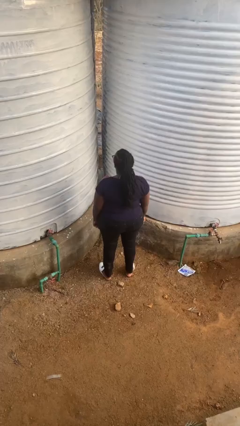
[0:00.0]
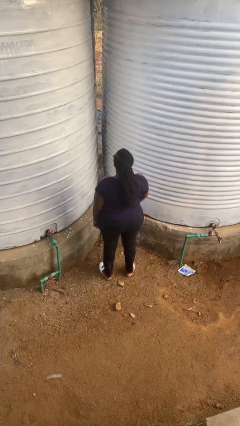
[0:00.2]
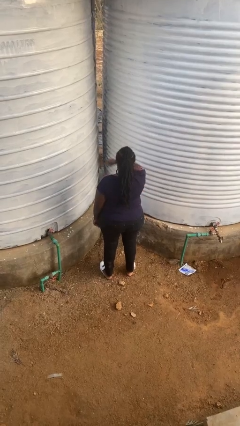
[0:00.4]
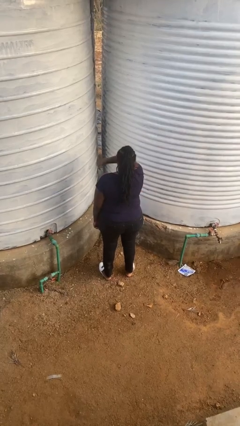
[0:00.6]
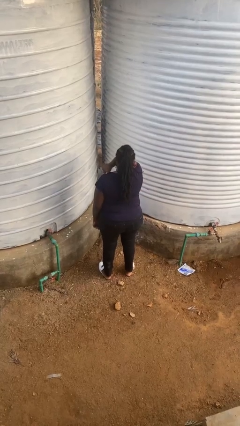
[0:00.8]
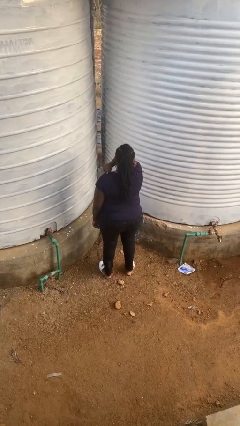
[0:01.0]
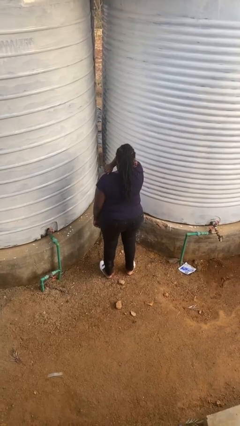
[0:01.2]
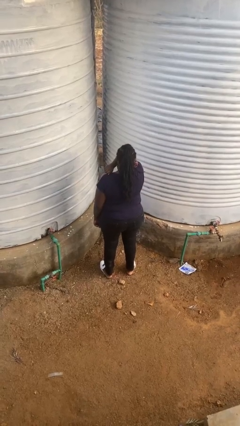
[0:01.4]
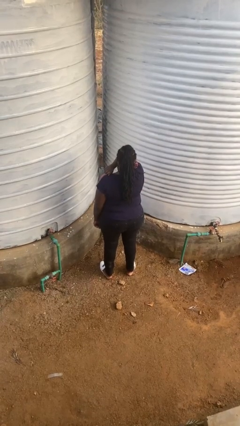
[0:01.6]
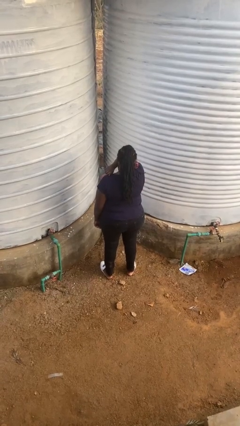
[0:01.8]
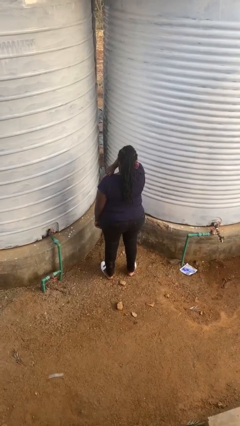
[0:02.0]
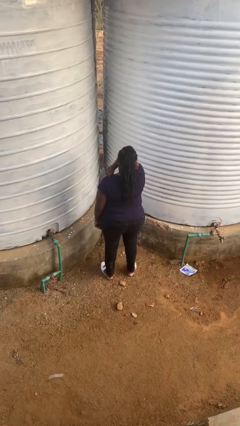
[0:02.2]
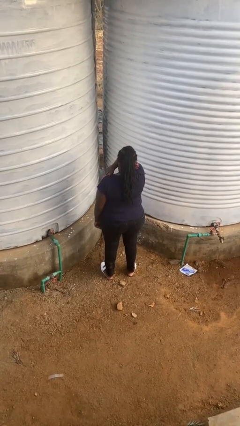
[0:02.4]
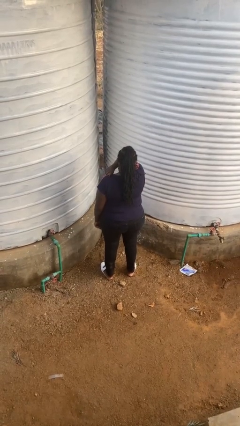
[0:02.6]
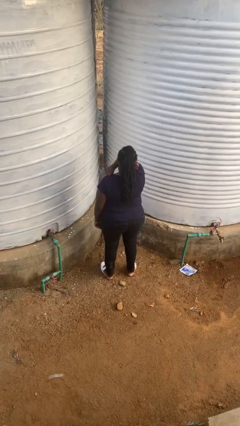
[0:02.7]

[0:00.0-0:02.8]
person sneezes into arm

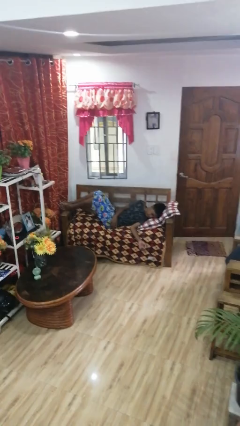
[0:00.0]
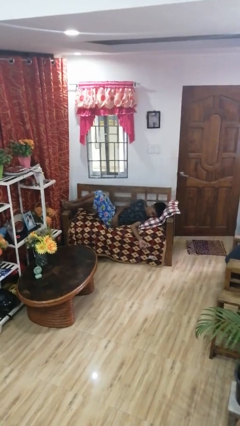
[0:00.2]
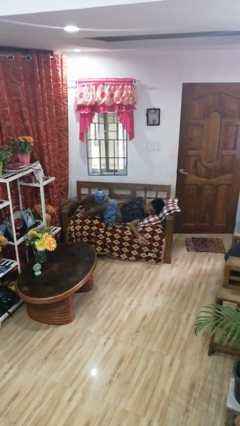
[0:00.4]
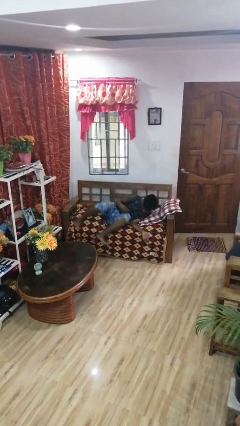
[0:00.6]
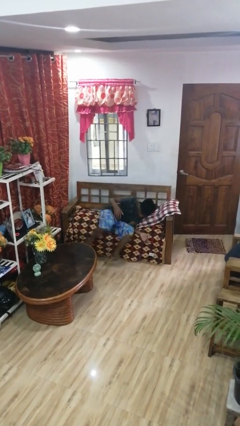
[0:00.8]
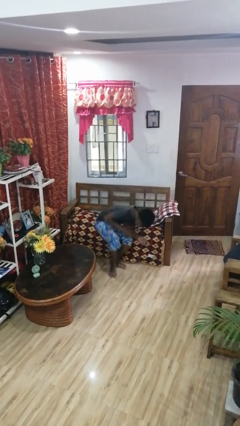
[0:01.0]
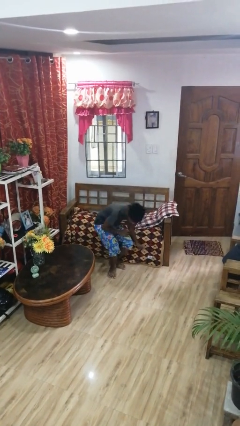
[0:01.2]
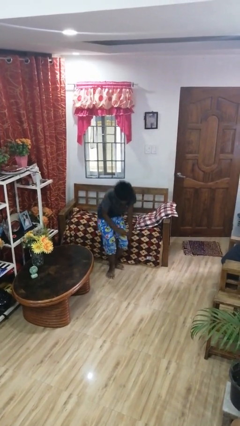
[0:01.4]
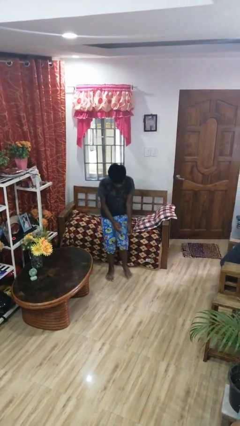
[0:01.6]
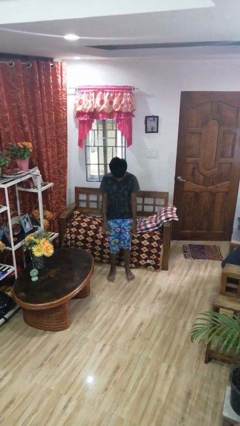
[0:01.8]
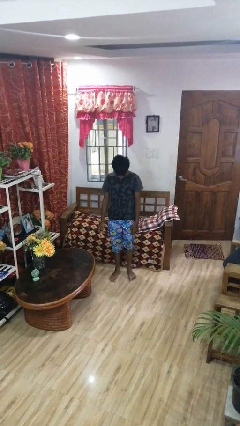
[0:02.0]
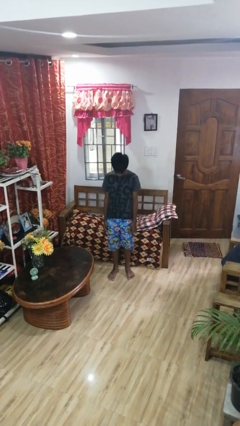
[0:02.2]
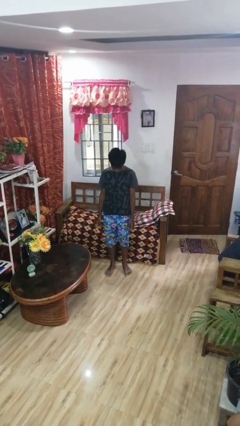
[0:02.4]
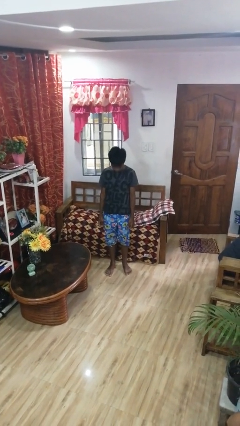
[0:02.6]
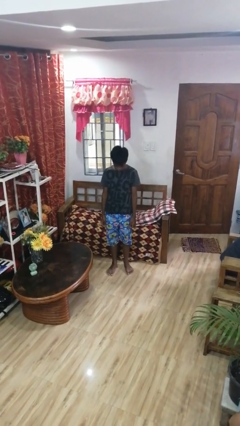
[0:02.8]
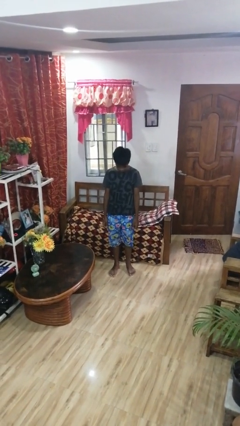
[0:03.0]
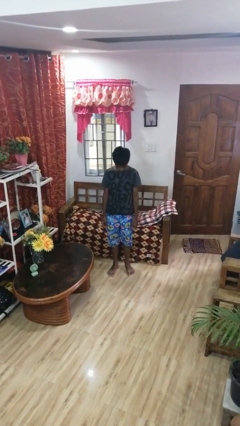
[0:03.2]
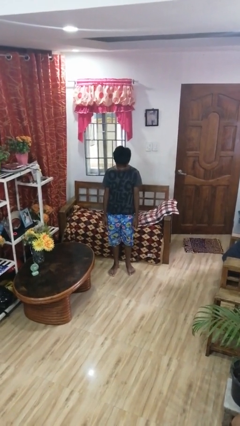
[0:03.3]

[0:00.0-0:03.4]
person stands up

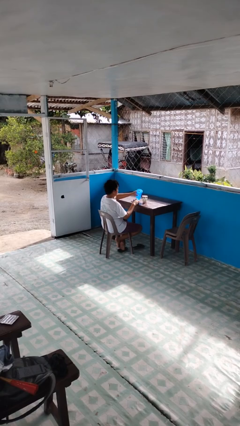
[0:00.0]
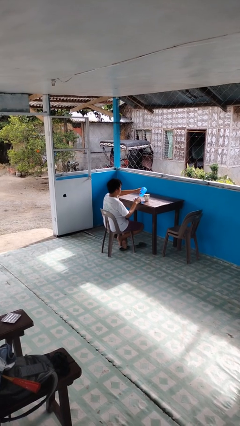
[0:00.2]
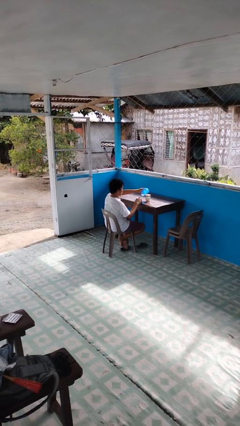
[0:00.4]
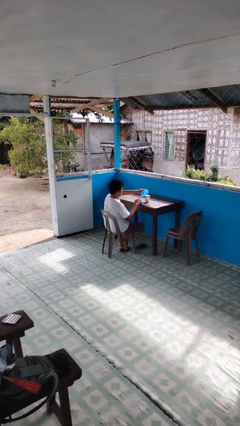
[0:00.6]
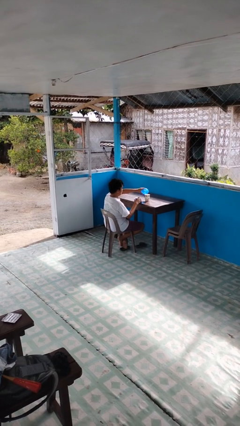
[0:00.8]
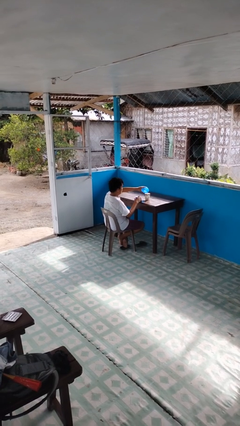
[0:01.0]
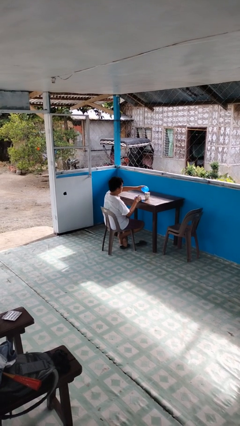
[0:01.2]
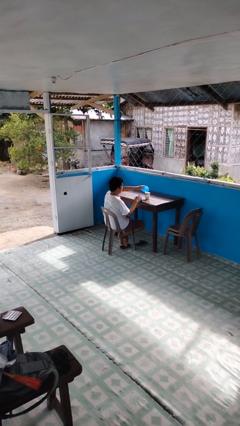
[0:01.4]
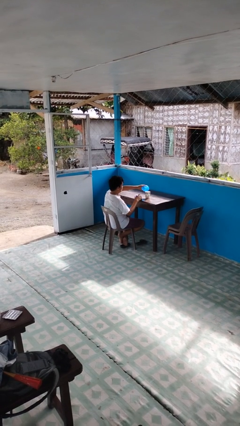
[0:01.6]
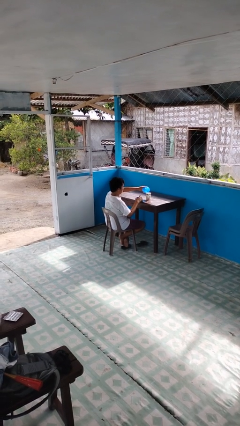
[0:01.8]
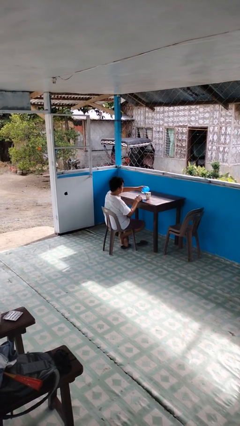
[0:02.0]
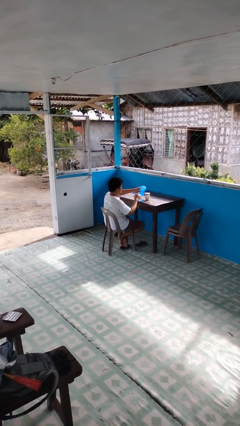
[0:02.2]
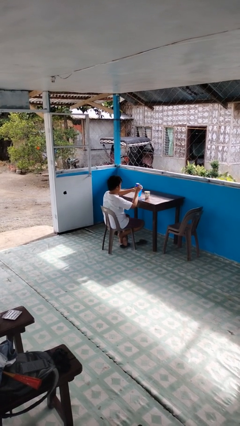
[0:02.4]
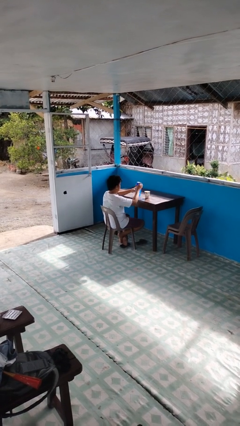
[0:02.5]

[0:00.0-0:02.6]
person pours liquid into cup

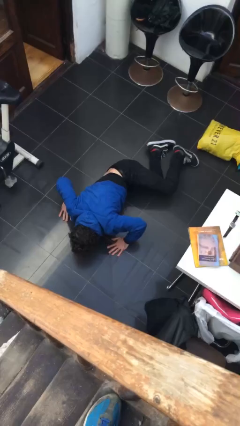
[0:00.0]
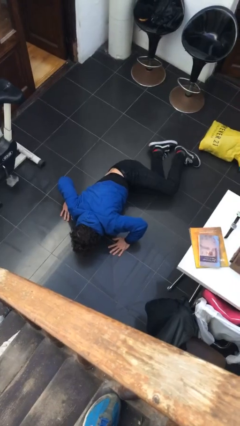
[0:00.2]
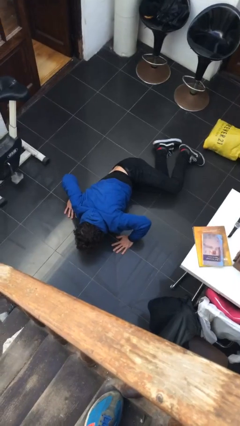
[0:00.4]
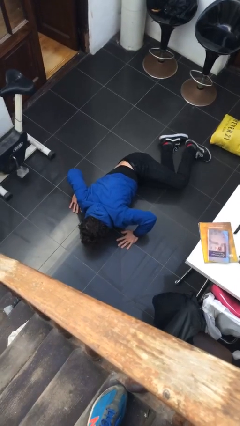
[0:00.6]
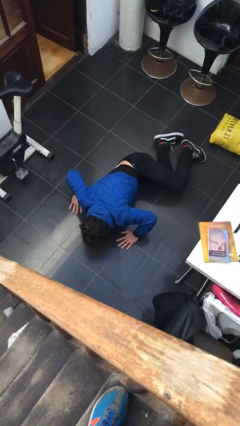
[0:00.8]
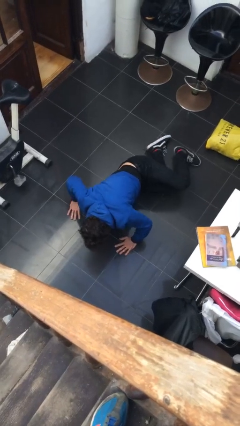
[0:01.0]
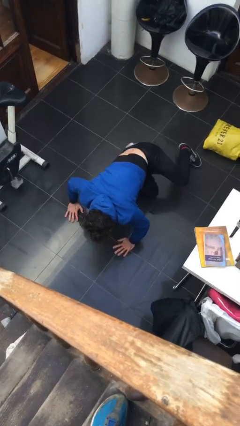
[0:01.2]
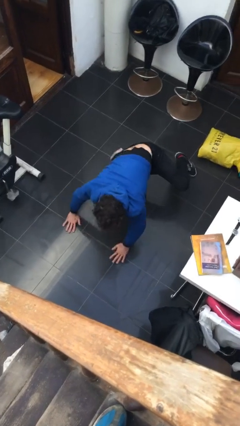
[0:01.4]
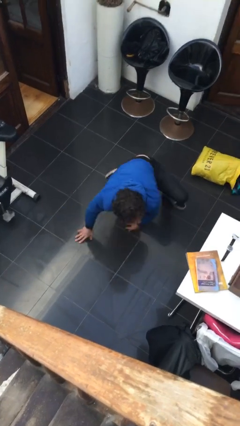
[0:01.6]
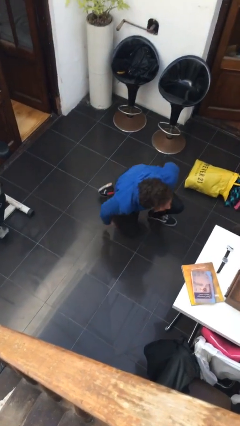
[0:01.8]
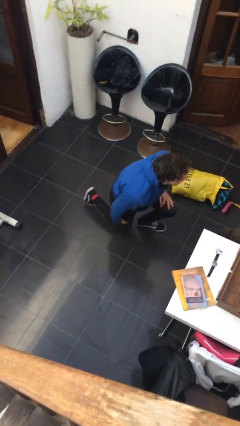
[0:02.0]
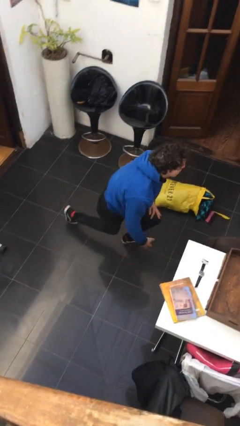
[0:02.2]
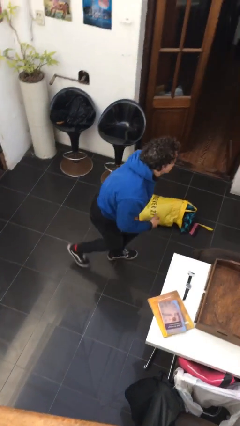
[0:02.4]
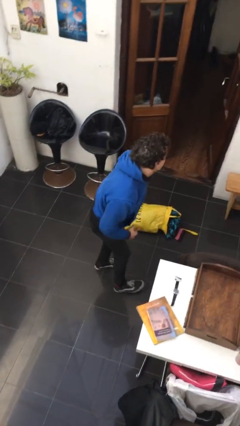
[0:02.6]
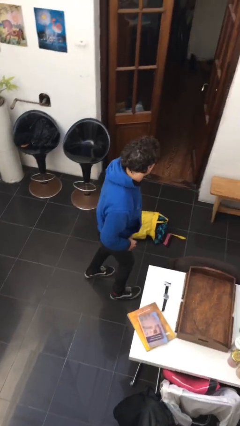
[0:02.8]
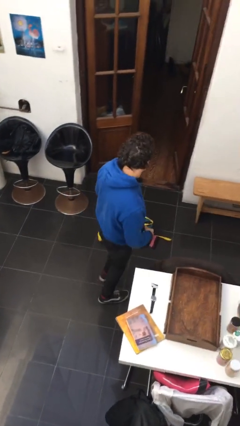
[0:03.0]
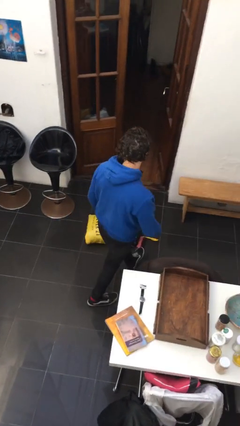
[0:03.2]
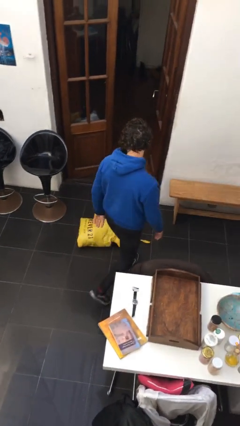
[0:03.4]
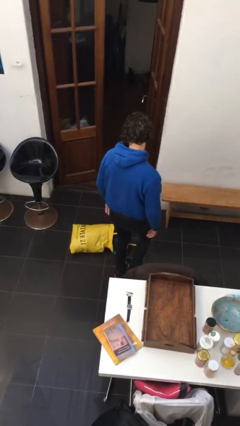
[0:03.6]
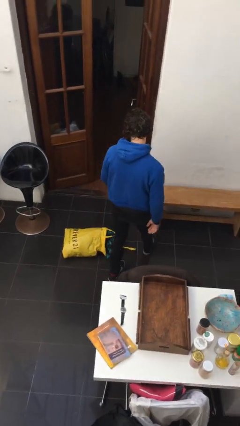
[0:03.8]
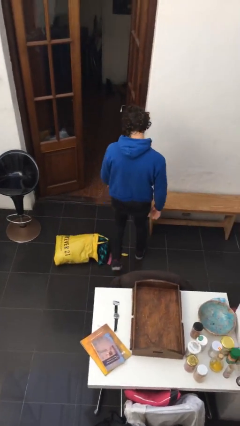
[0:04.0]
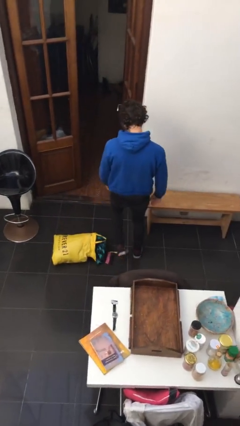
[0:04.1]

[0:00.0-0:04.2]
person stands up from floor

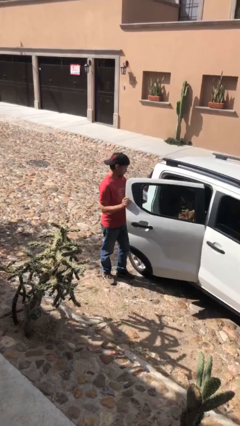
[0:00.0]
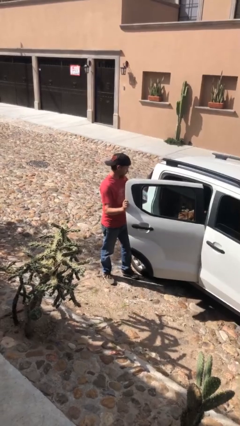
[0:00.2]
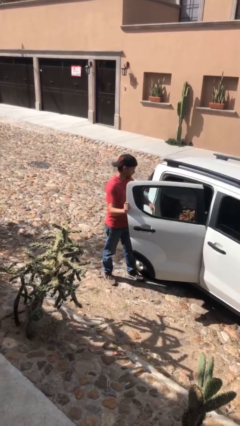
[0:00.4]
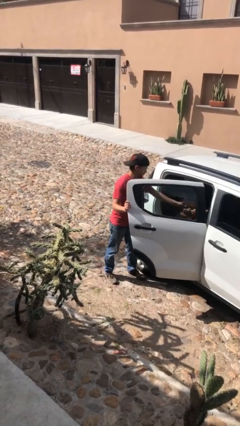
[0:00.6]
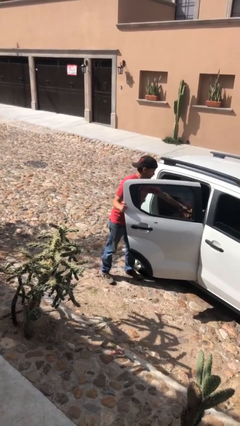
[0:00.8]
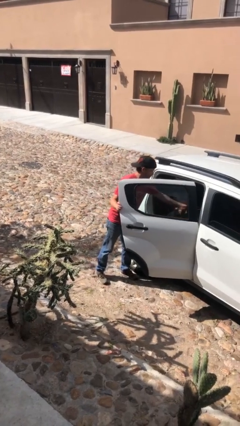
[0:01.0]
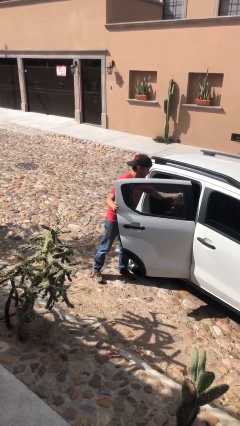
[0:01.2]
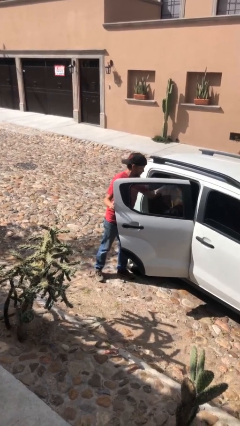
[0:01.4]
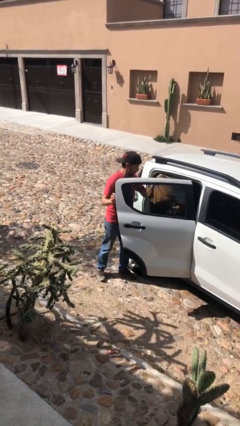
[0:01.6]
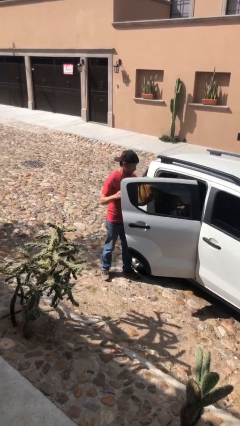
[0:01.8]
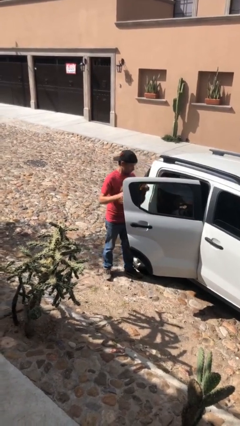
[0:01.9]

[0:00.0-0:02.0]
person unloads car

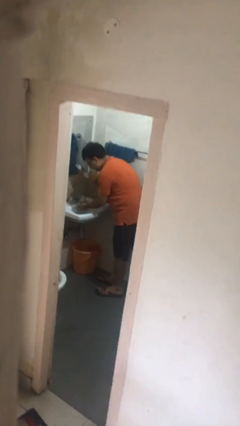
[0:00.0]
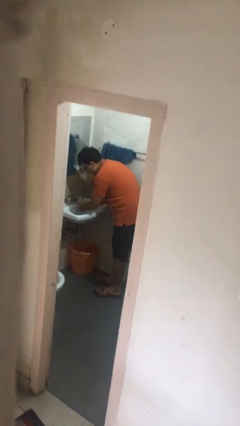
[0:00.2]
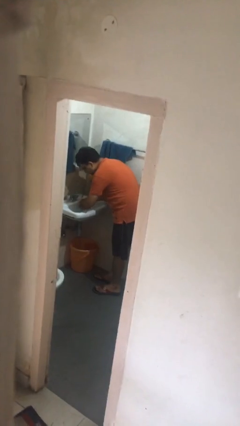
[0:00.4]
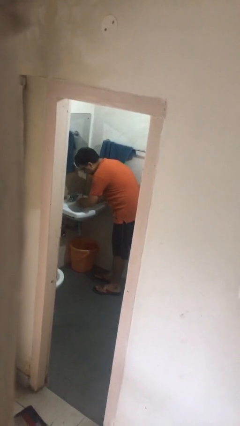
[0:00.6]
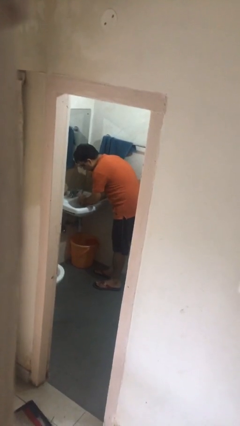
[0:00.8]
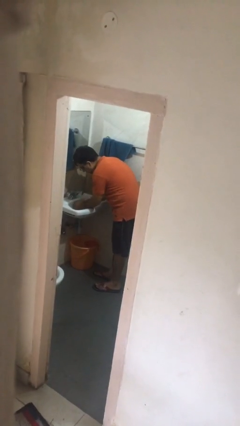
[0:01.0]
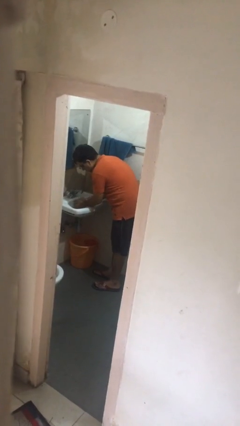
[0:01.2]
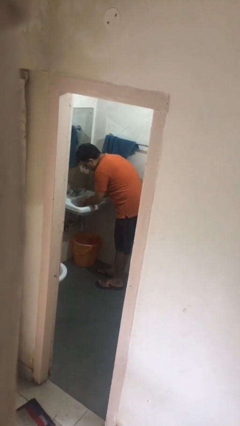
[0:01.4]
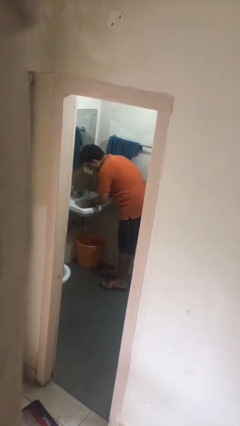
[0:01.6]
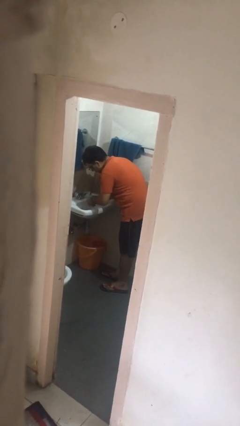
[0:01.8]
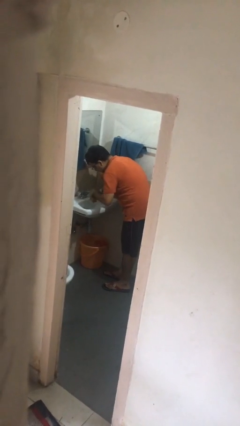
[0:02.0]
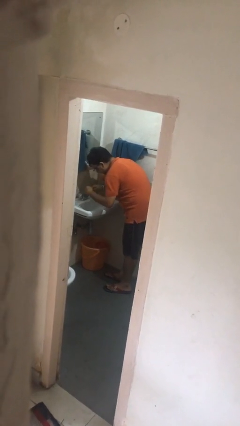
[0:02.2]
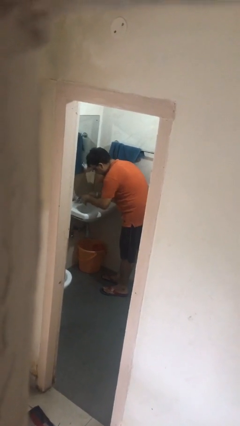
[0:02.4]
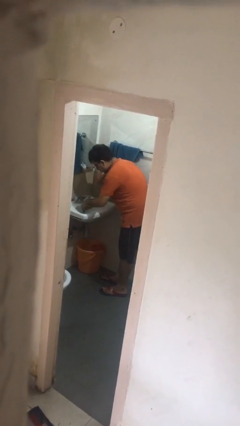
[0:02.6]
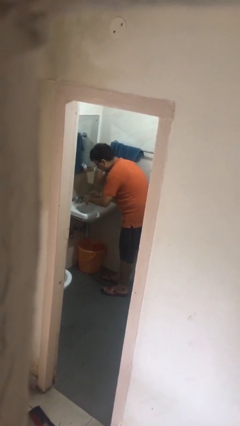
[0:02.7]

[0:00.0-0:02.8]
person washes hands
